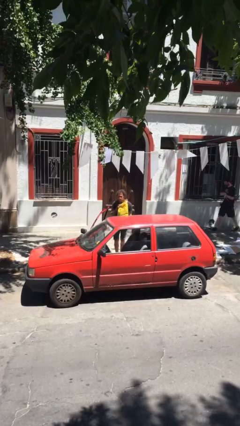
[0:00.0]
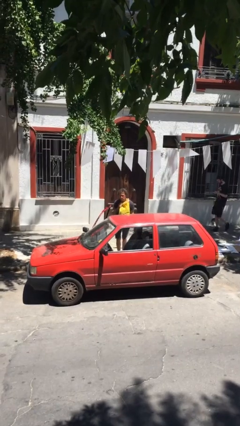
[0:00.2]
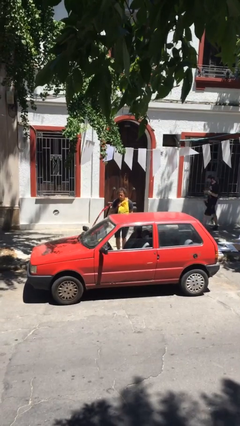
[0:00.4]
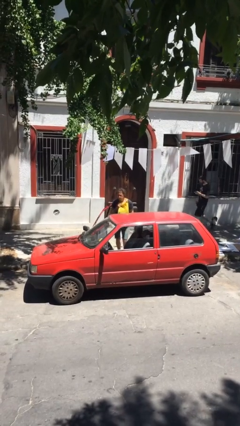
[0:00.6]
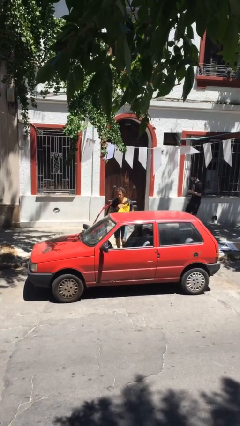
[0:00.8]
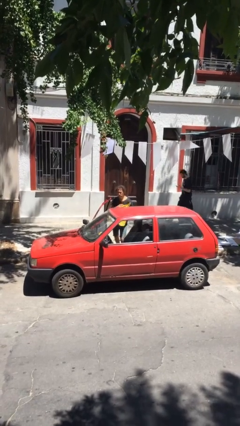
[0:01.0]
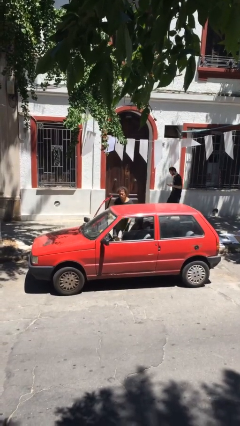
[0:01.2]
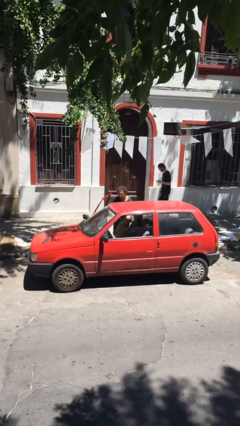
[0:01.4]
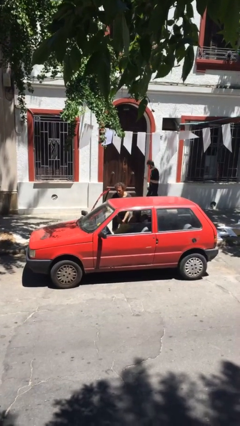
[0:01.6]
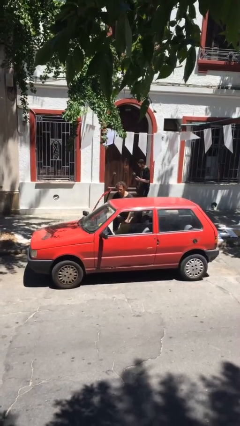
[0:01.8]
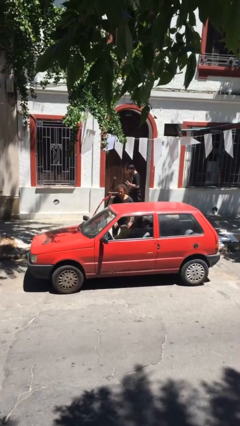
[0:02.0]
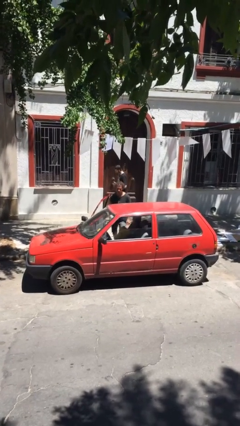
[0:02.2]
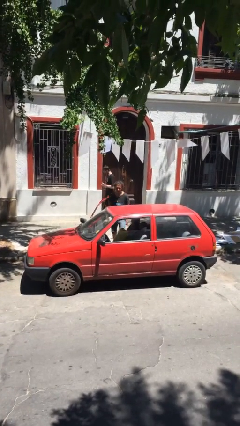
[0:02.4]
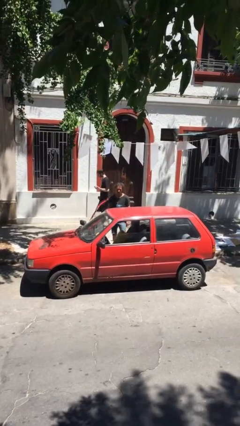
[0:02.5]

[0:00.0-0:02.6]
person loads car

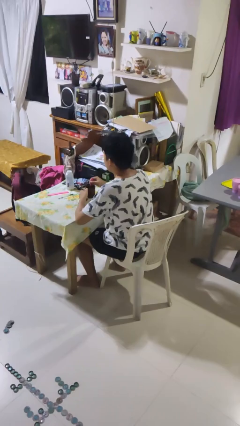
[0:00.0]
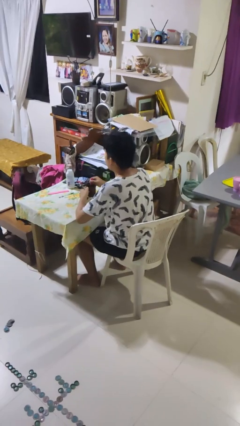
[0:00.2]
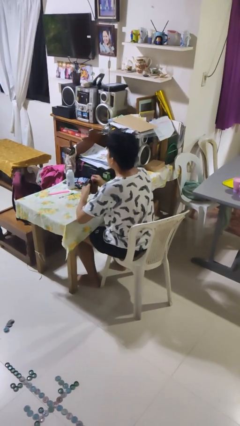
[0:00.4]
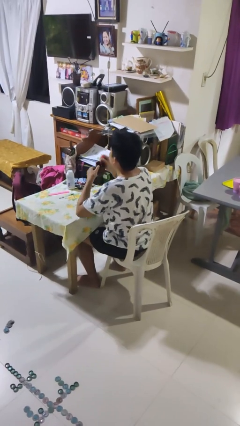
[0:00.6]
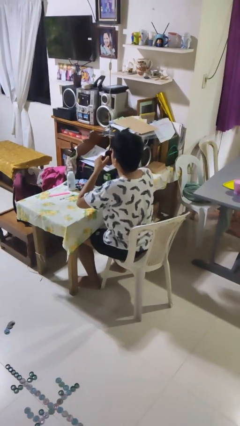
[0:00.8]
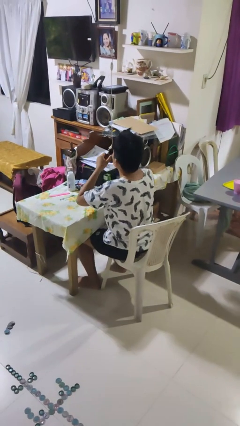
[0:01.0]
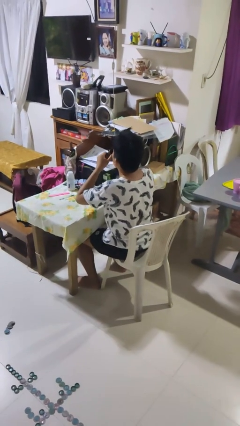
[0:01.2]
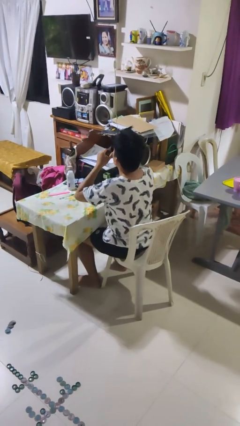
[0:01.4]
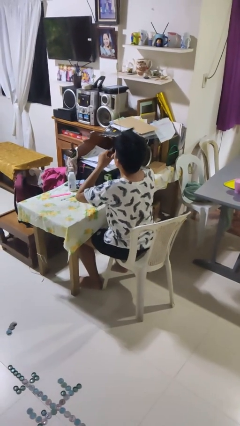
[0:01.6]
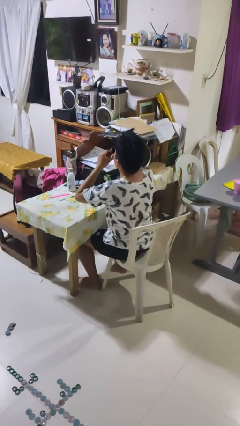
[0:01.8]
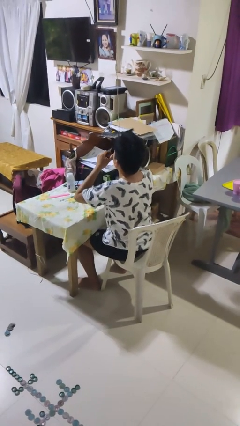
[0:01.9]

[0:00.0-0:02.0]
person drinks from mug

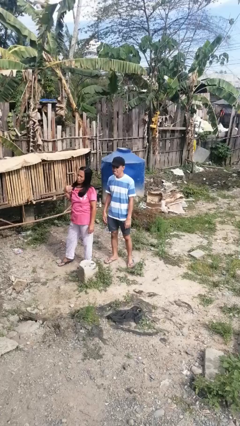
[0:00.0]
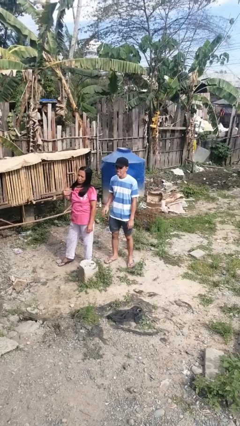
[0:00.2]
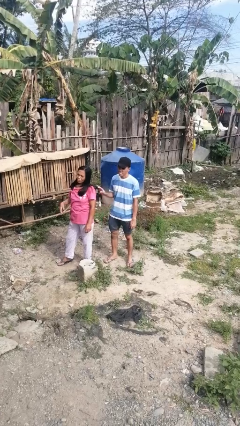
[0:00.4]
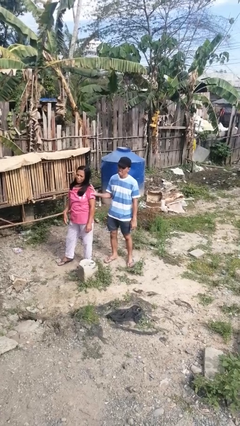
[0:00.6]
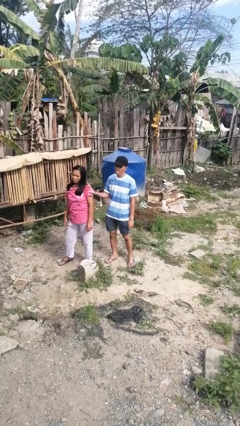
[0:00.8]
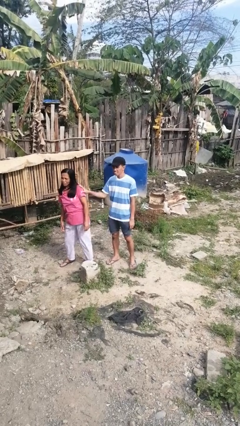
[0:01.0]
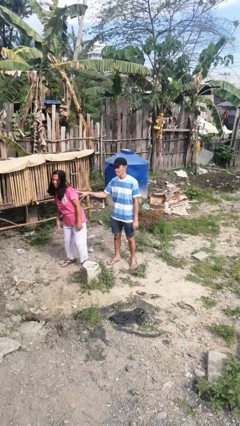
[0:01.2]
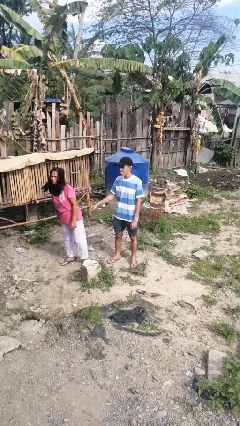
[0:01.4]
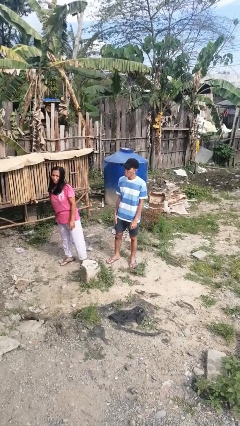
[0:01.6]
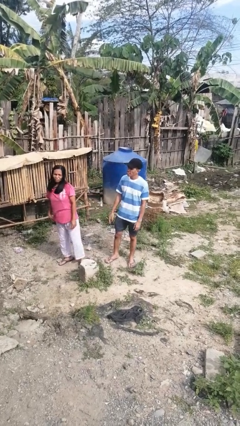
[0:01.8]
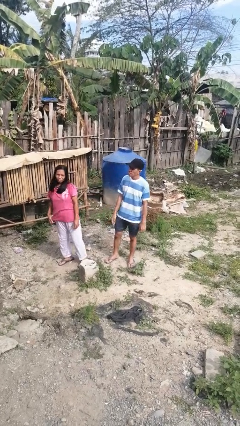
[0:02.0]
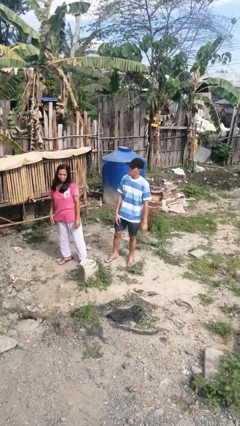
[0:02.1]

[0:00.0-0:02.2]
person shoves person

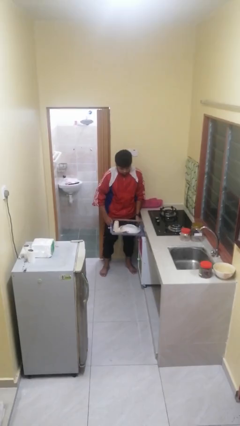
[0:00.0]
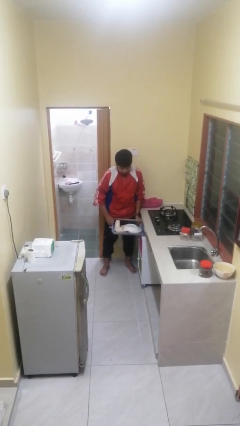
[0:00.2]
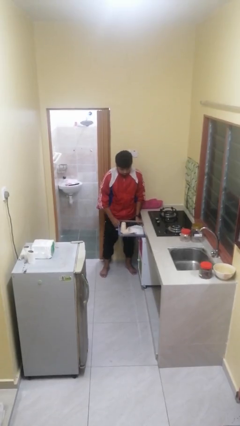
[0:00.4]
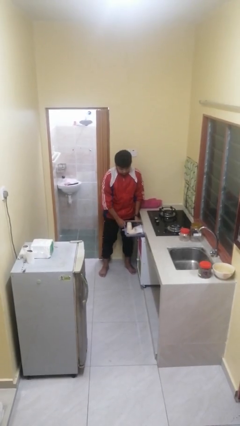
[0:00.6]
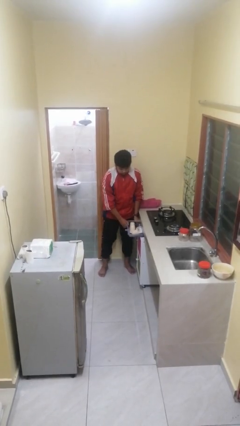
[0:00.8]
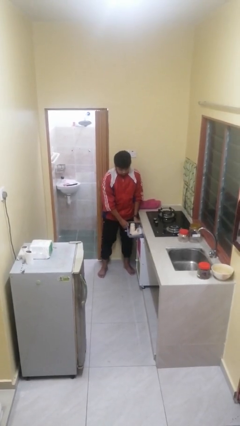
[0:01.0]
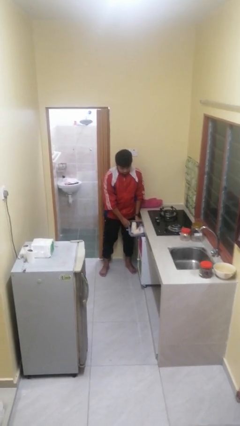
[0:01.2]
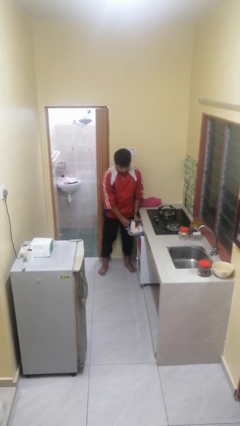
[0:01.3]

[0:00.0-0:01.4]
person closes kitchen drawer

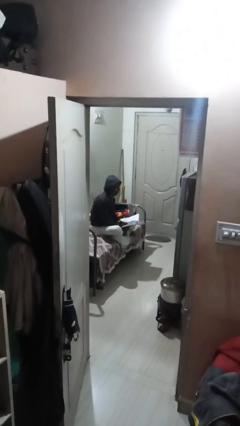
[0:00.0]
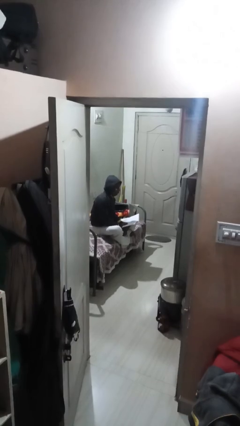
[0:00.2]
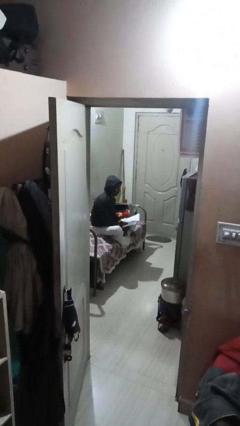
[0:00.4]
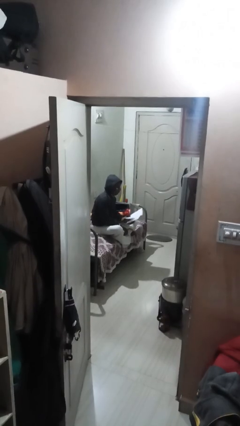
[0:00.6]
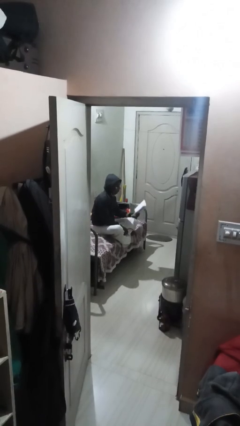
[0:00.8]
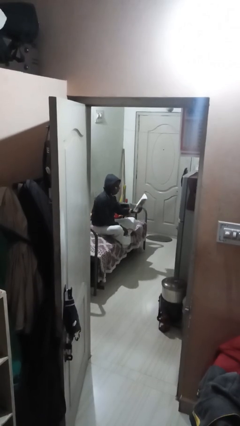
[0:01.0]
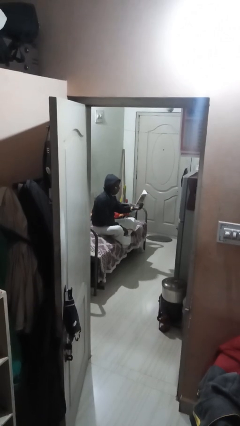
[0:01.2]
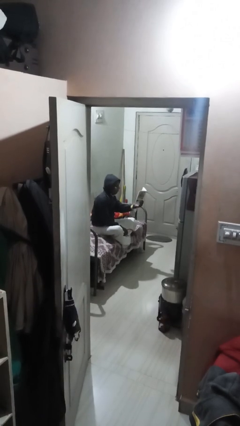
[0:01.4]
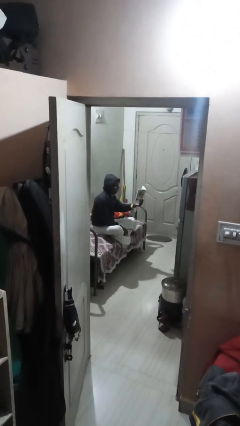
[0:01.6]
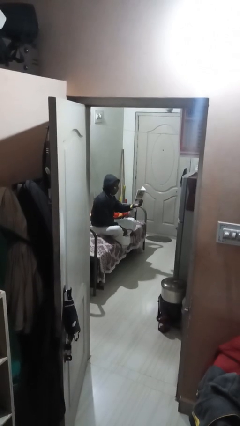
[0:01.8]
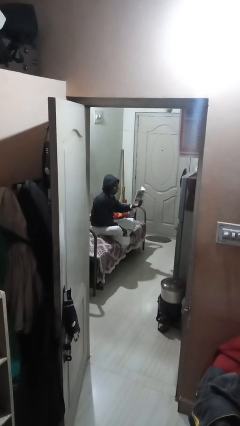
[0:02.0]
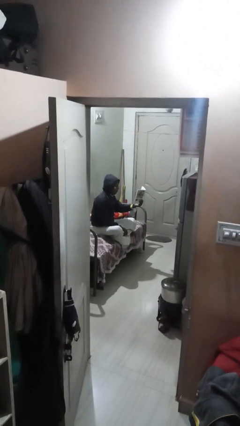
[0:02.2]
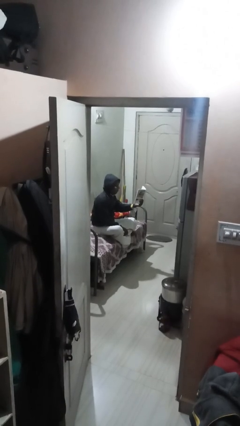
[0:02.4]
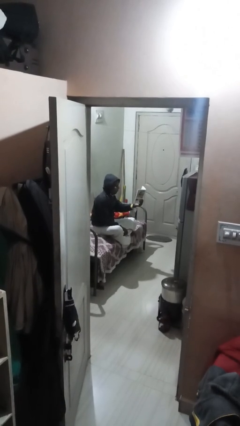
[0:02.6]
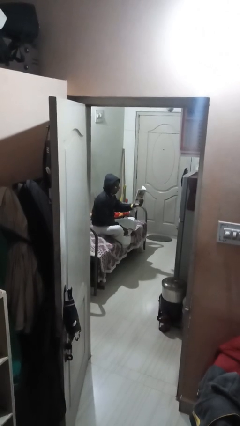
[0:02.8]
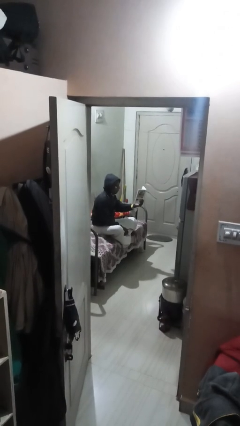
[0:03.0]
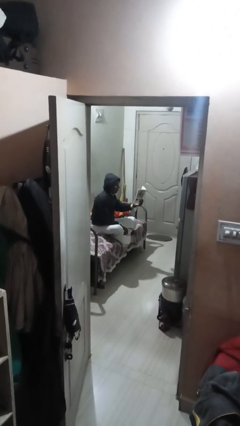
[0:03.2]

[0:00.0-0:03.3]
person reads document

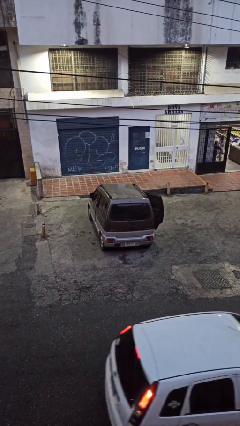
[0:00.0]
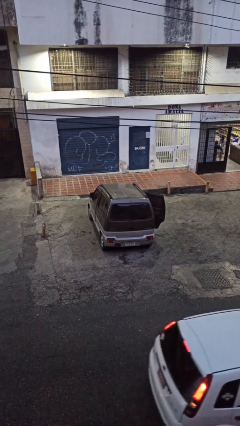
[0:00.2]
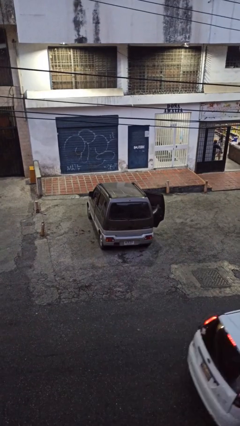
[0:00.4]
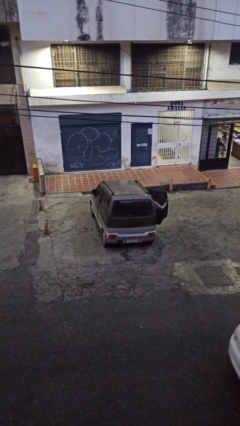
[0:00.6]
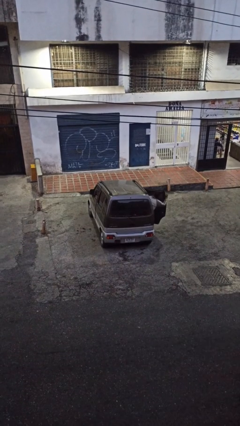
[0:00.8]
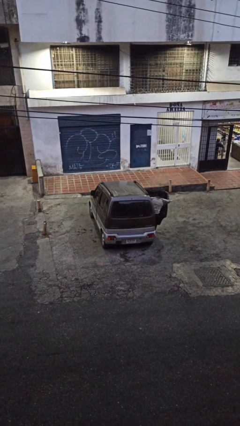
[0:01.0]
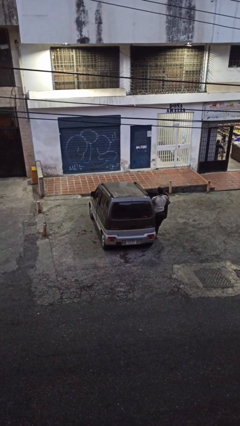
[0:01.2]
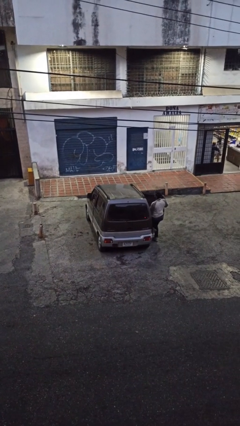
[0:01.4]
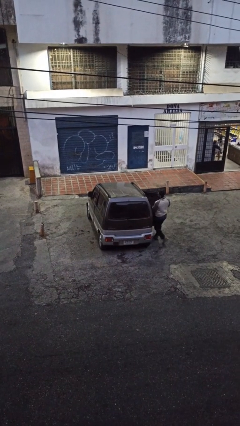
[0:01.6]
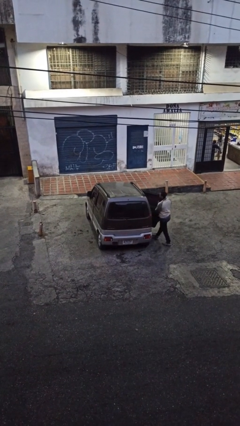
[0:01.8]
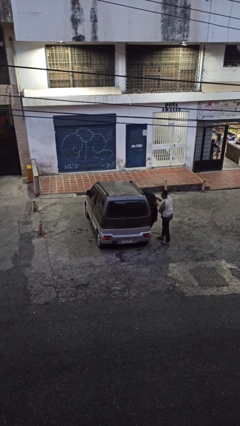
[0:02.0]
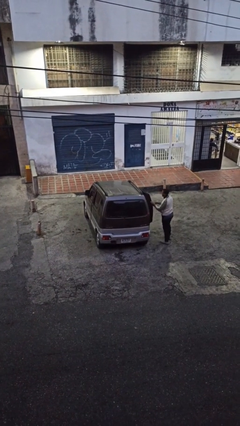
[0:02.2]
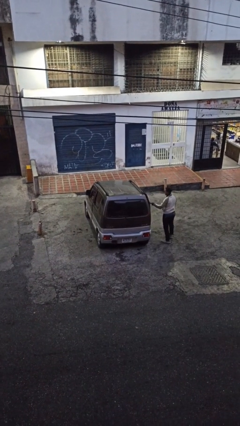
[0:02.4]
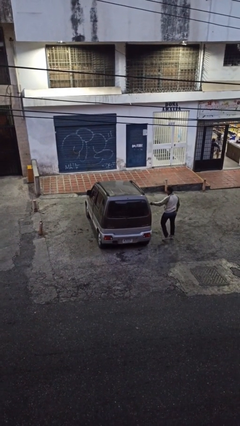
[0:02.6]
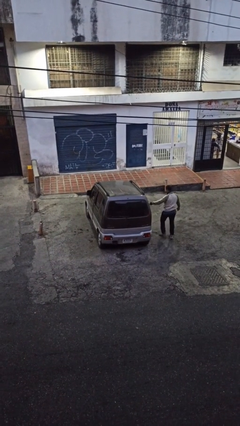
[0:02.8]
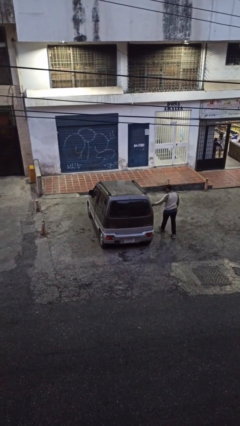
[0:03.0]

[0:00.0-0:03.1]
car drops off person

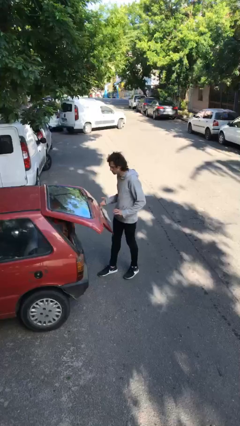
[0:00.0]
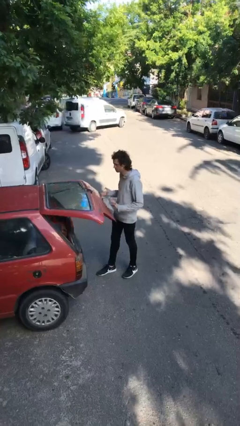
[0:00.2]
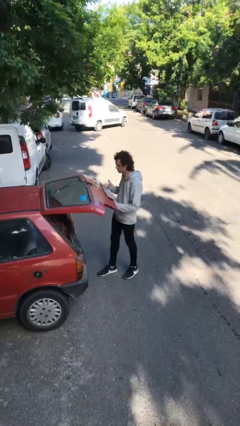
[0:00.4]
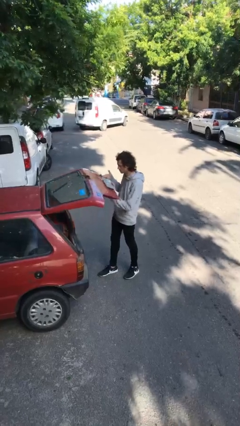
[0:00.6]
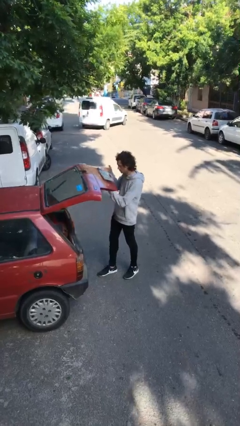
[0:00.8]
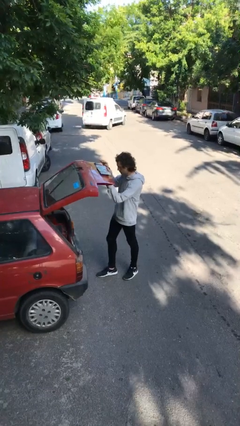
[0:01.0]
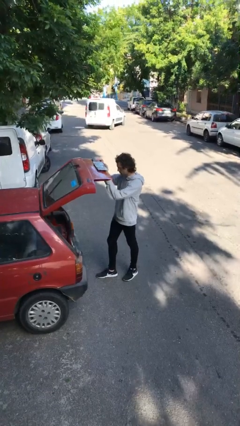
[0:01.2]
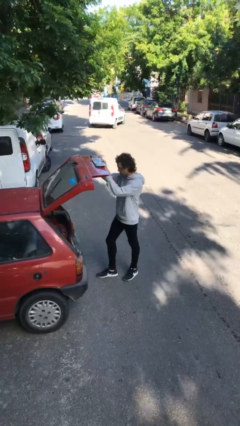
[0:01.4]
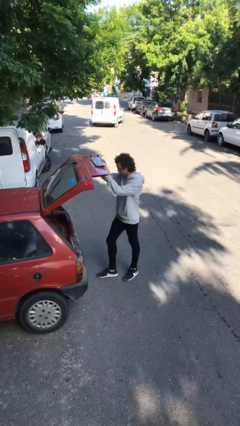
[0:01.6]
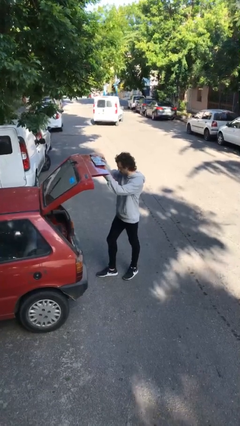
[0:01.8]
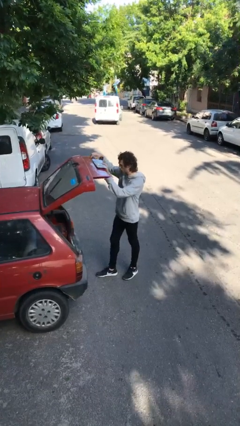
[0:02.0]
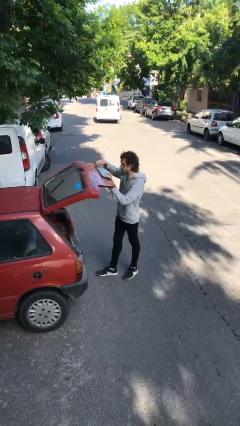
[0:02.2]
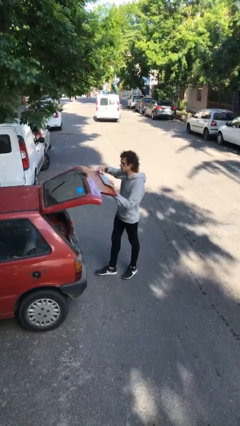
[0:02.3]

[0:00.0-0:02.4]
person opens car trunk
